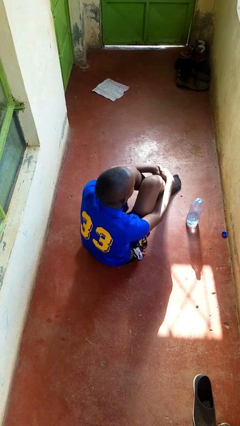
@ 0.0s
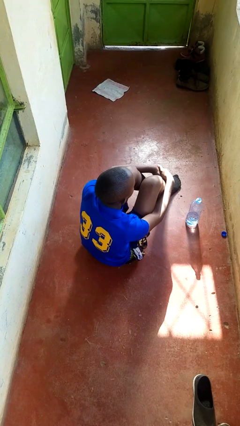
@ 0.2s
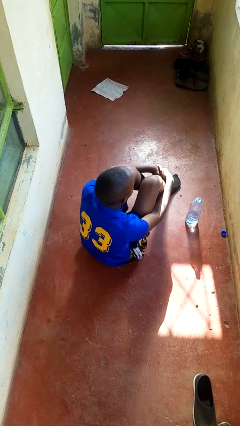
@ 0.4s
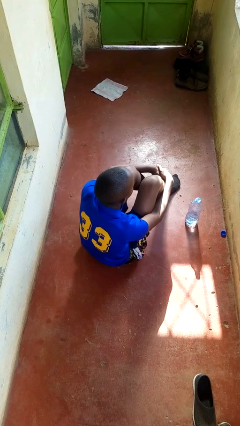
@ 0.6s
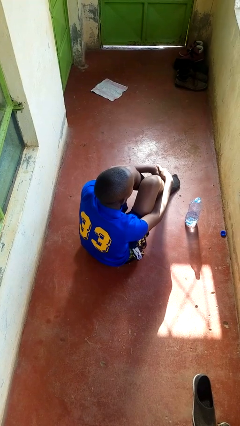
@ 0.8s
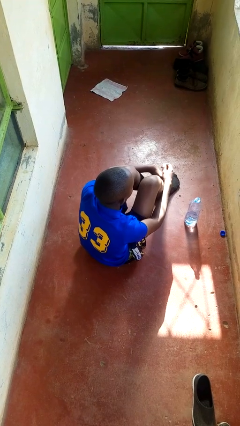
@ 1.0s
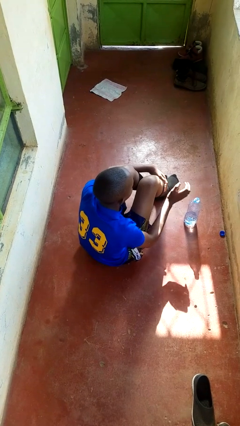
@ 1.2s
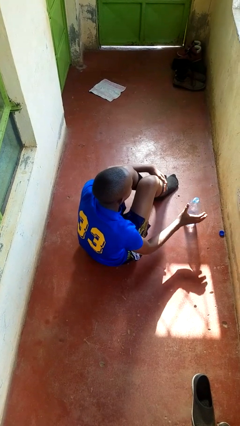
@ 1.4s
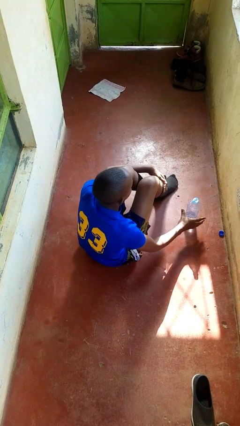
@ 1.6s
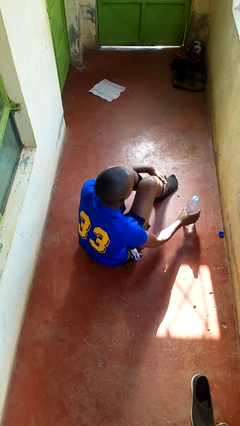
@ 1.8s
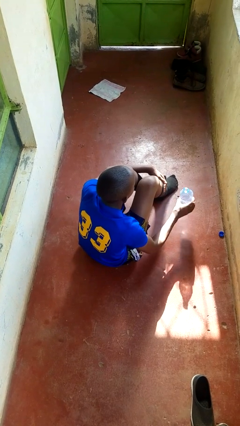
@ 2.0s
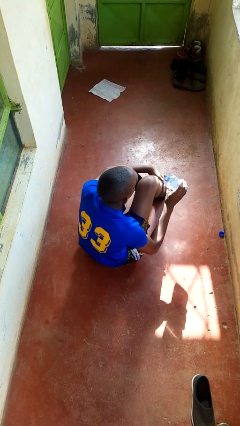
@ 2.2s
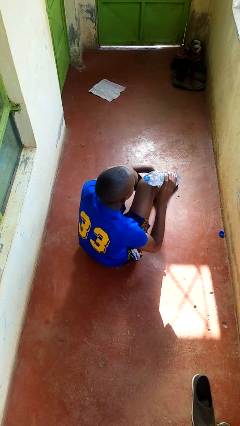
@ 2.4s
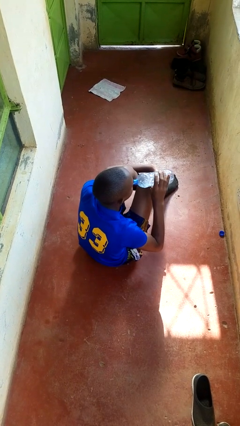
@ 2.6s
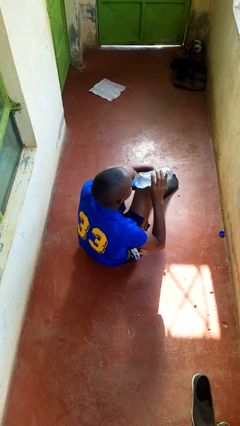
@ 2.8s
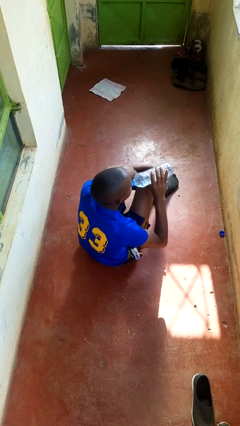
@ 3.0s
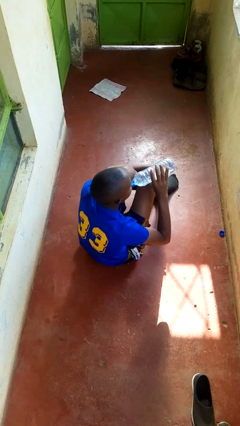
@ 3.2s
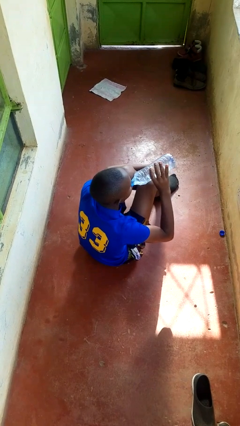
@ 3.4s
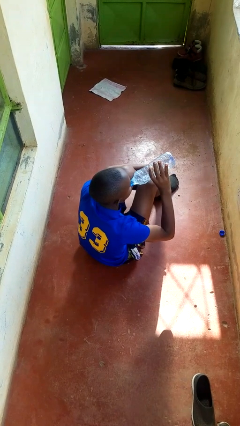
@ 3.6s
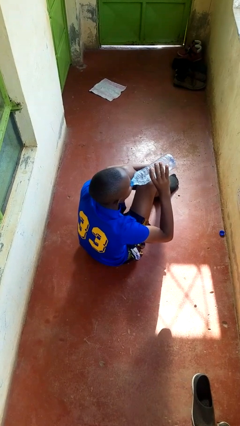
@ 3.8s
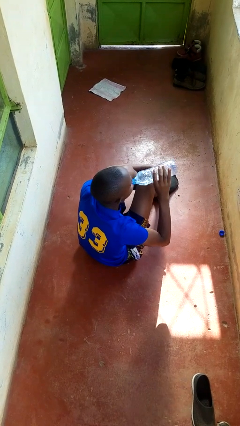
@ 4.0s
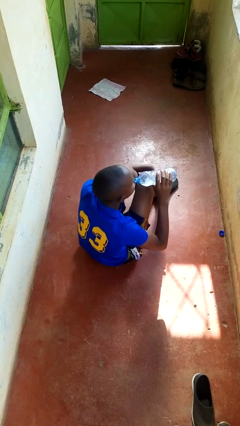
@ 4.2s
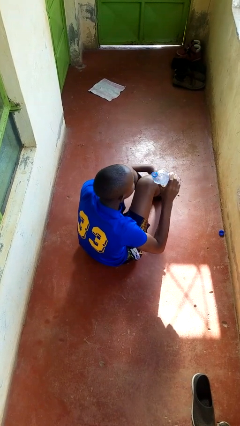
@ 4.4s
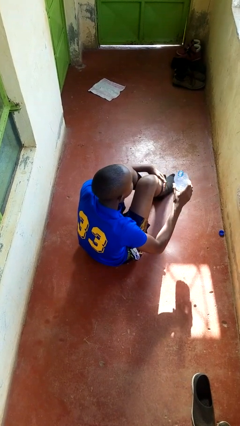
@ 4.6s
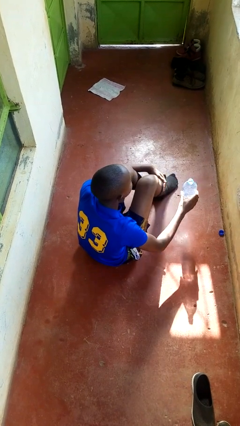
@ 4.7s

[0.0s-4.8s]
person drinks from bottle

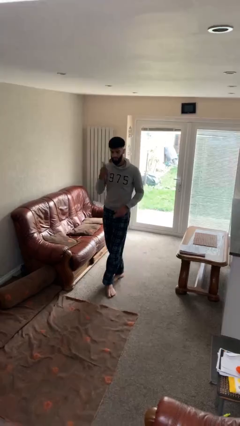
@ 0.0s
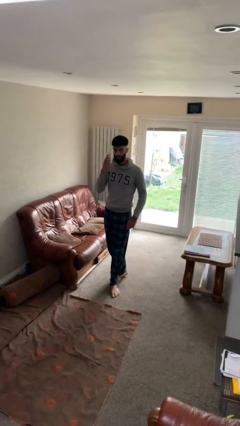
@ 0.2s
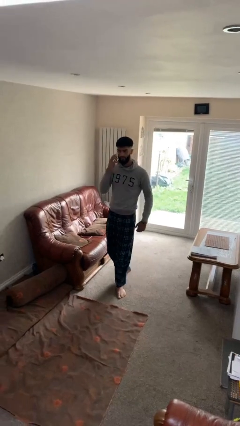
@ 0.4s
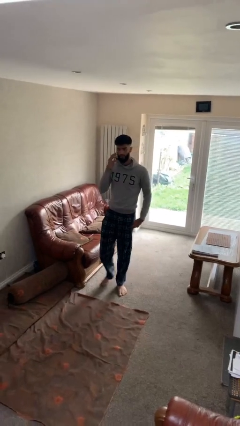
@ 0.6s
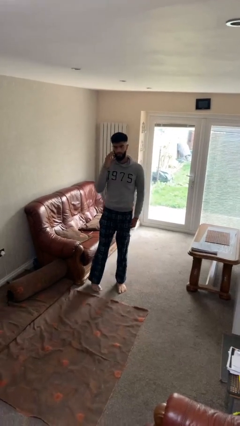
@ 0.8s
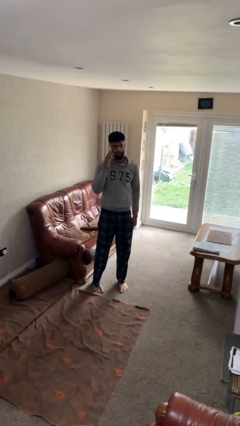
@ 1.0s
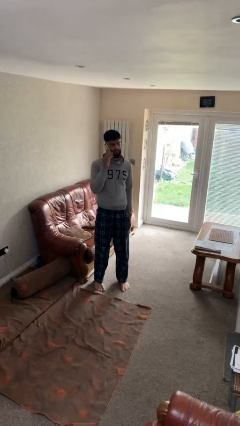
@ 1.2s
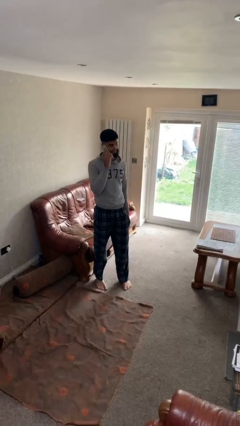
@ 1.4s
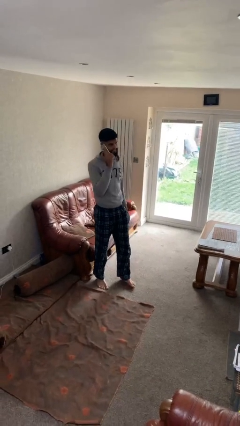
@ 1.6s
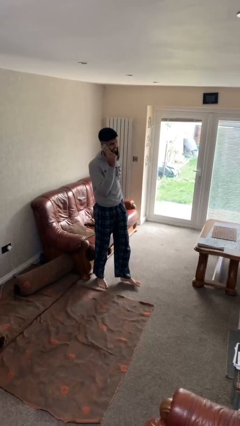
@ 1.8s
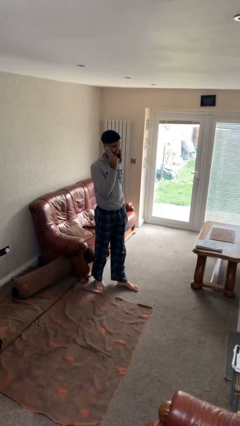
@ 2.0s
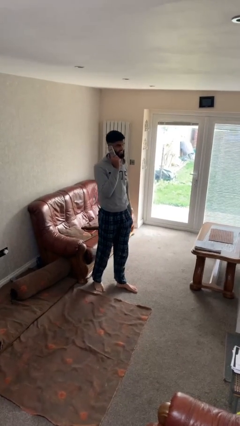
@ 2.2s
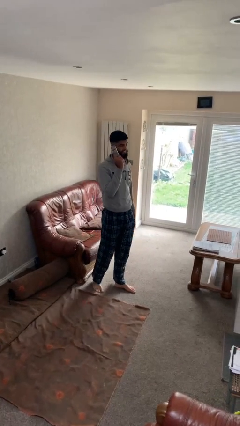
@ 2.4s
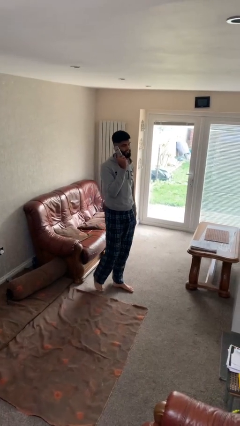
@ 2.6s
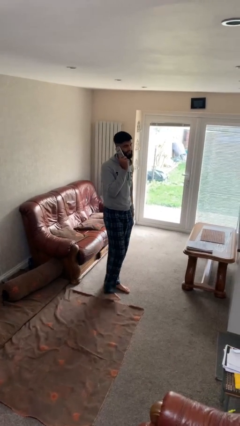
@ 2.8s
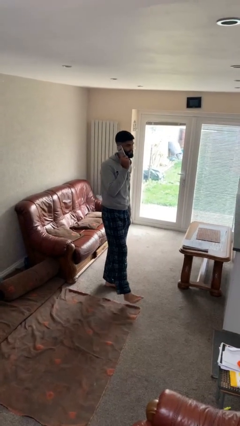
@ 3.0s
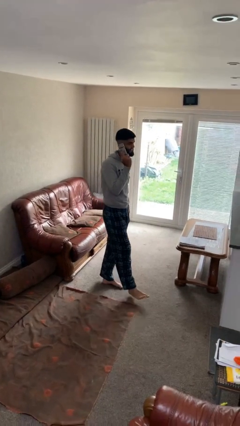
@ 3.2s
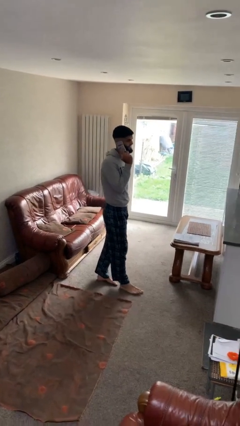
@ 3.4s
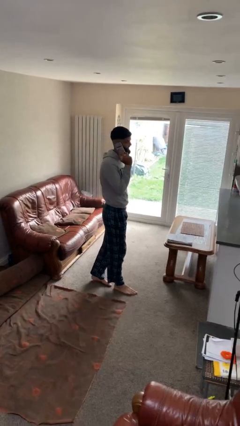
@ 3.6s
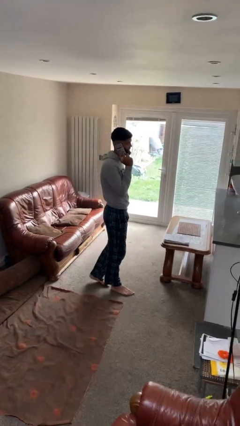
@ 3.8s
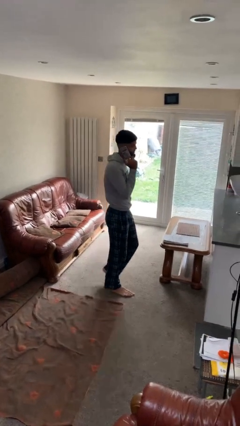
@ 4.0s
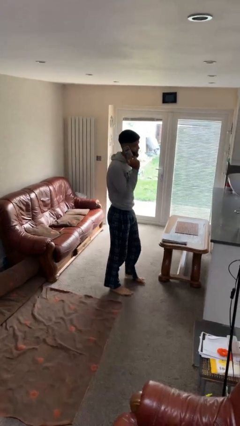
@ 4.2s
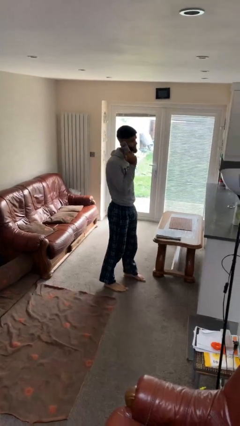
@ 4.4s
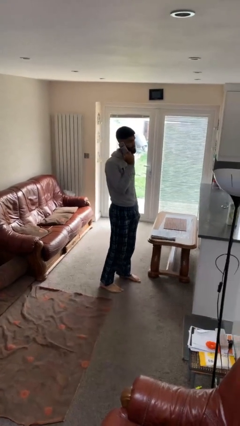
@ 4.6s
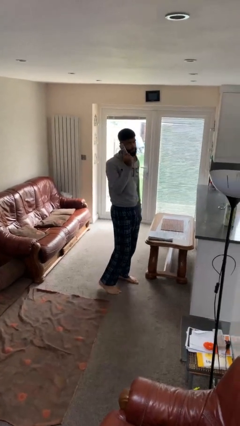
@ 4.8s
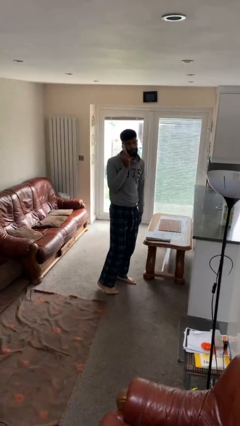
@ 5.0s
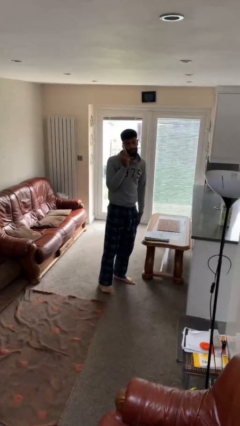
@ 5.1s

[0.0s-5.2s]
person talks on phone

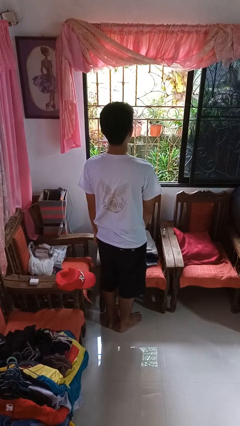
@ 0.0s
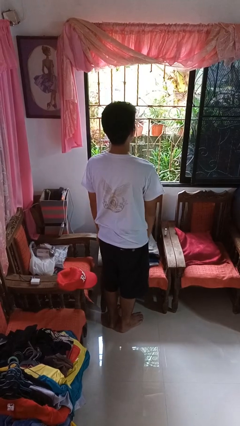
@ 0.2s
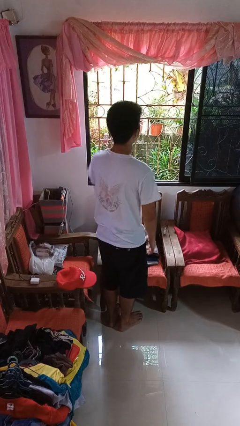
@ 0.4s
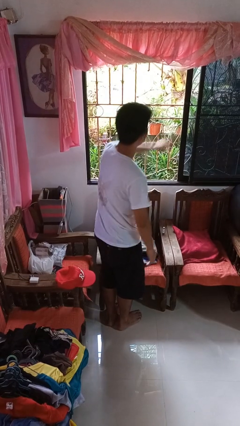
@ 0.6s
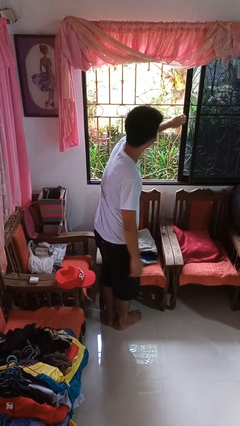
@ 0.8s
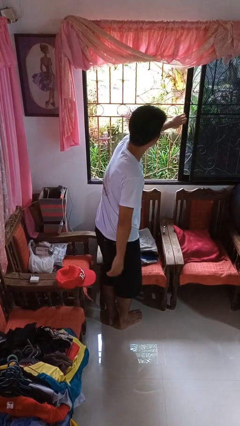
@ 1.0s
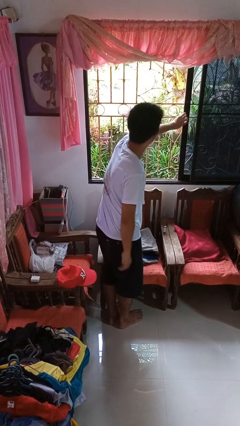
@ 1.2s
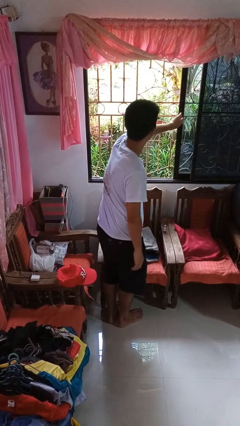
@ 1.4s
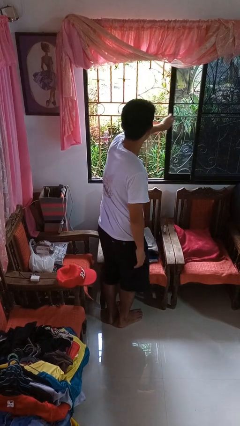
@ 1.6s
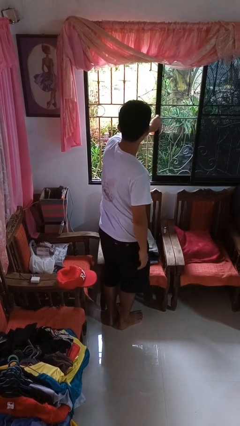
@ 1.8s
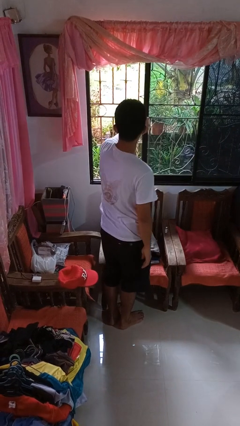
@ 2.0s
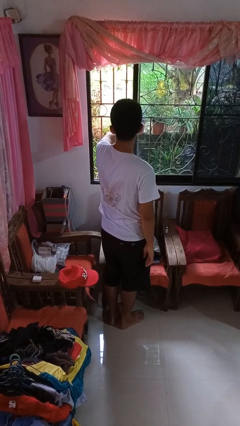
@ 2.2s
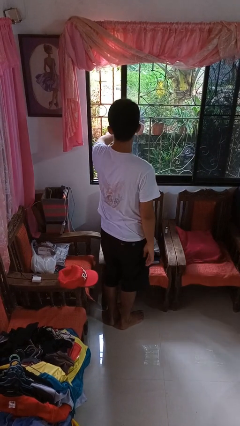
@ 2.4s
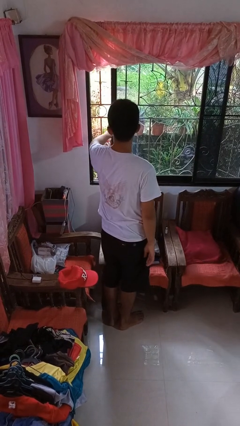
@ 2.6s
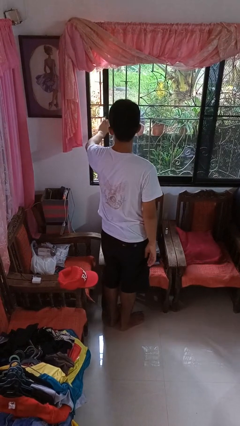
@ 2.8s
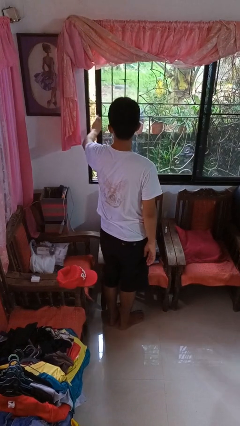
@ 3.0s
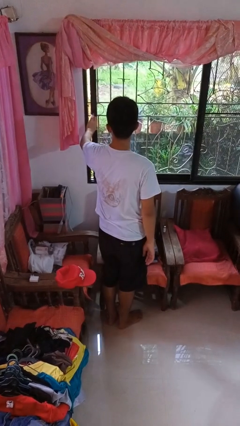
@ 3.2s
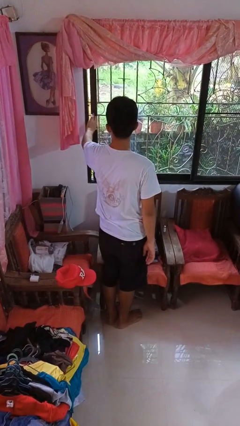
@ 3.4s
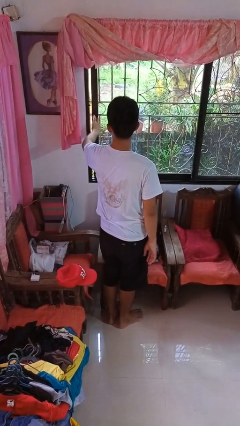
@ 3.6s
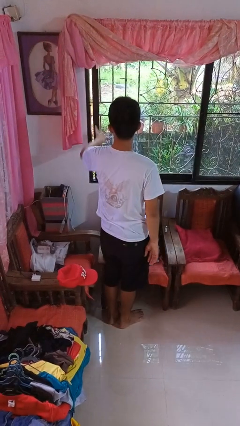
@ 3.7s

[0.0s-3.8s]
person closes home window

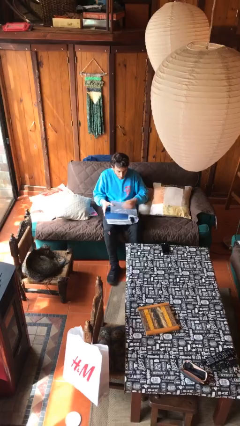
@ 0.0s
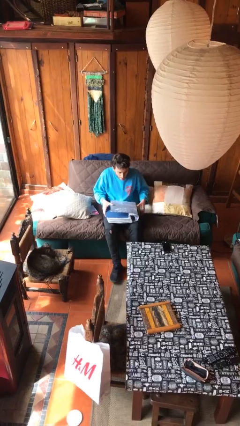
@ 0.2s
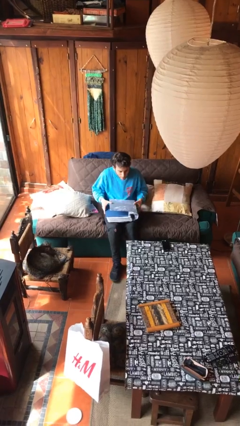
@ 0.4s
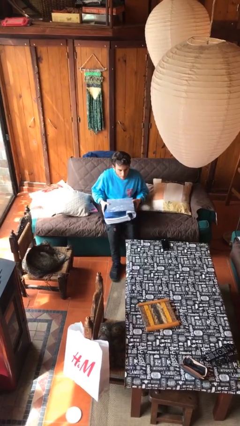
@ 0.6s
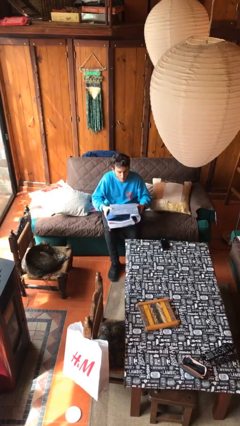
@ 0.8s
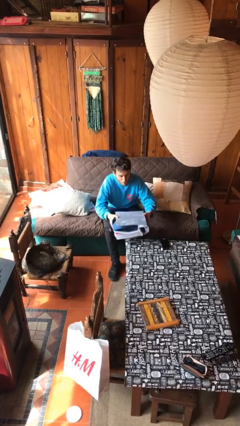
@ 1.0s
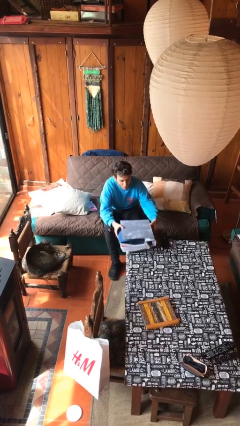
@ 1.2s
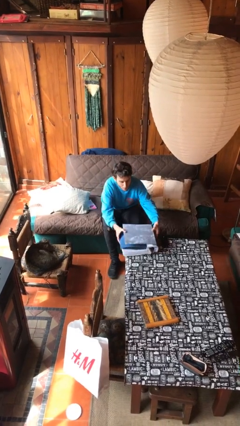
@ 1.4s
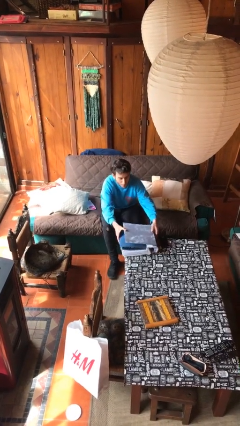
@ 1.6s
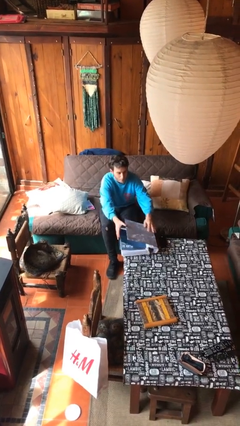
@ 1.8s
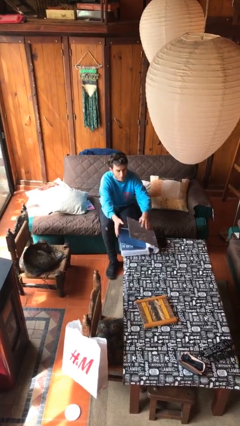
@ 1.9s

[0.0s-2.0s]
person puts down object on table

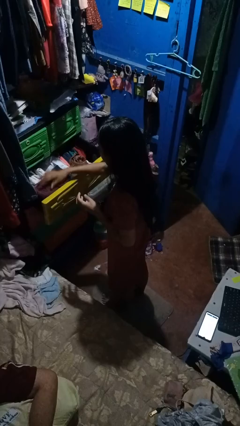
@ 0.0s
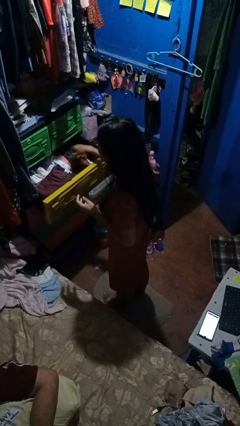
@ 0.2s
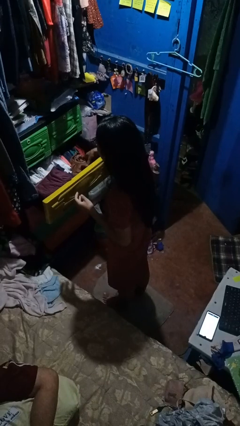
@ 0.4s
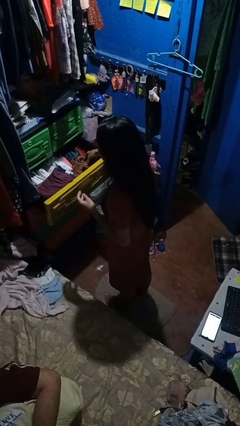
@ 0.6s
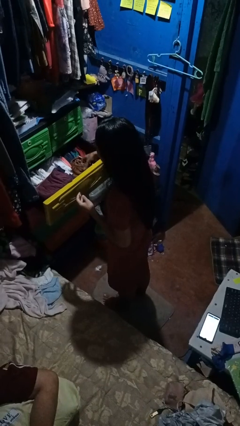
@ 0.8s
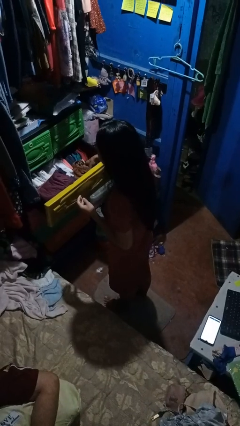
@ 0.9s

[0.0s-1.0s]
person puts clothes into dresser

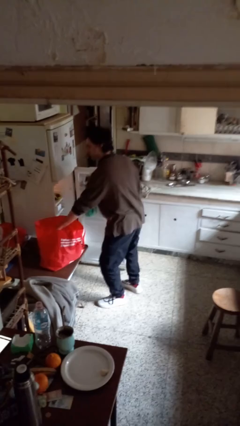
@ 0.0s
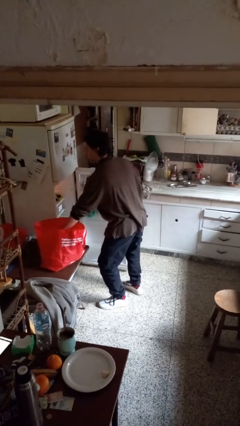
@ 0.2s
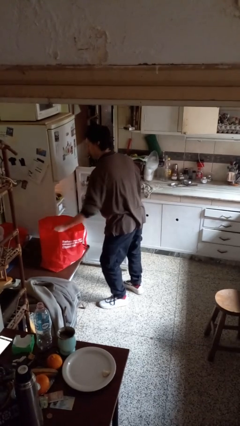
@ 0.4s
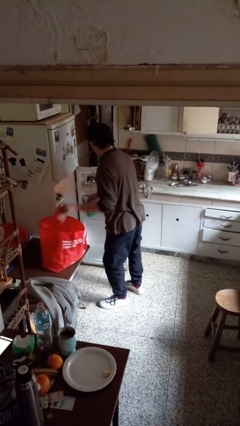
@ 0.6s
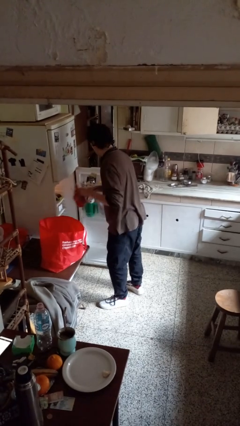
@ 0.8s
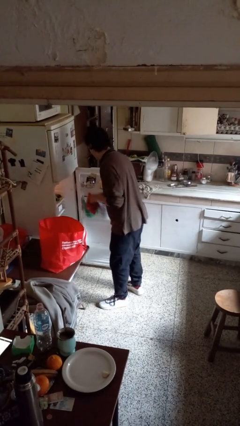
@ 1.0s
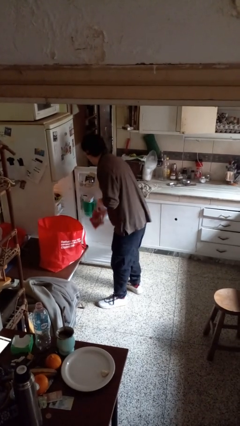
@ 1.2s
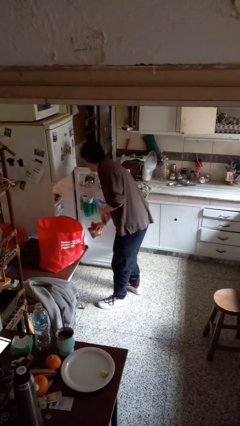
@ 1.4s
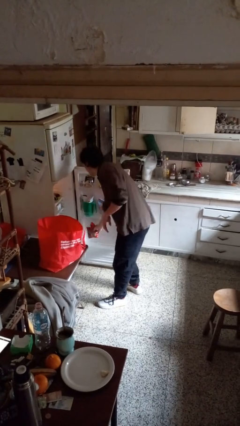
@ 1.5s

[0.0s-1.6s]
person loads groceries into refrigerator
